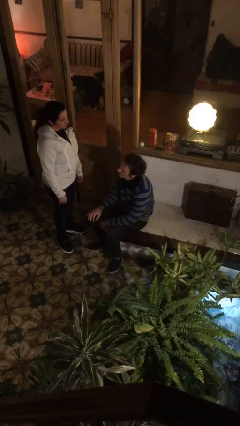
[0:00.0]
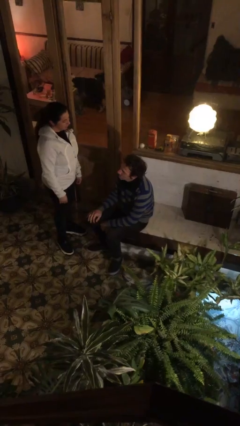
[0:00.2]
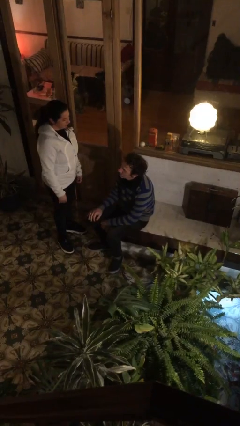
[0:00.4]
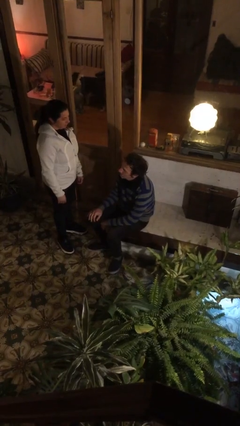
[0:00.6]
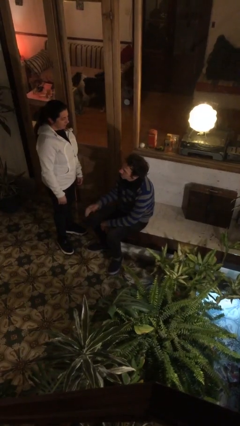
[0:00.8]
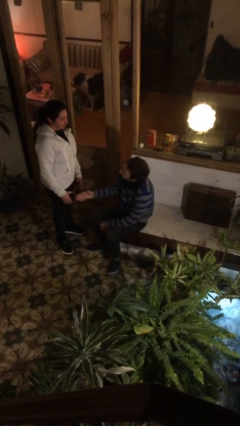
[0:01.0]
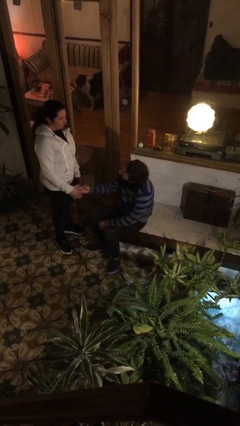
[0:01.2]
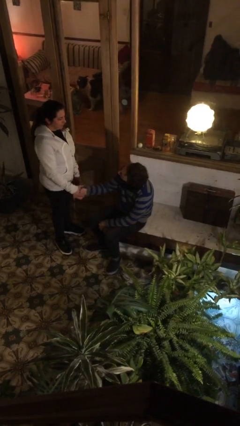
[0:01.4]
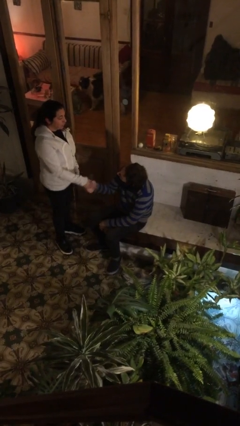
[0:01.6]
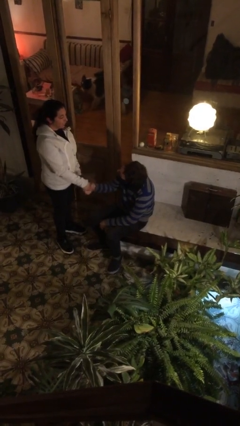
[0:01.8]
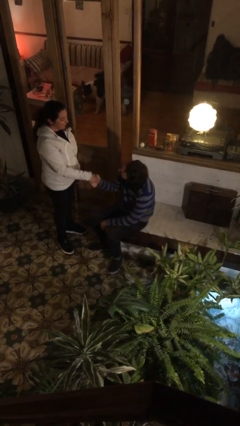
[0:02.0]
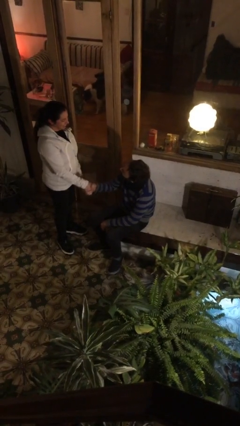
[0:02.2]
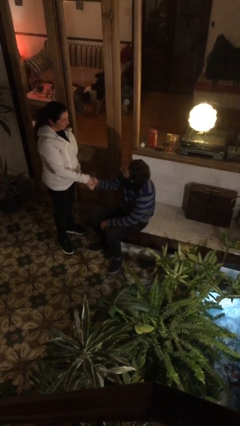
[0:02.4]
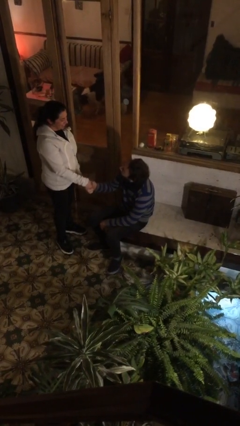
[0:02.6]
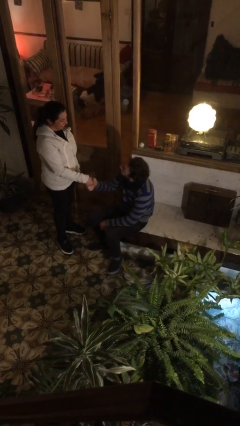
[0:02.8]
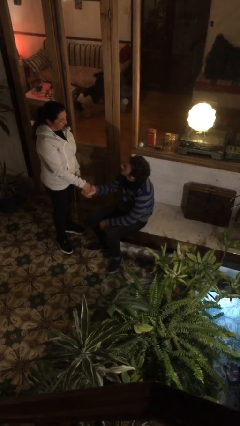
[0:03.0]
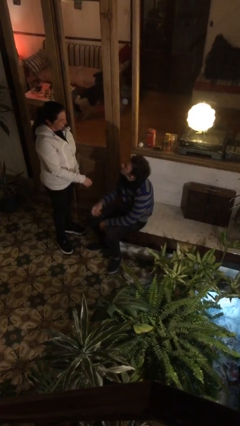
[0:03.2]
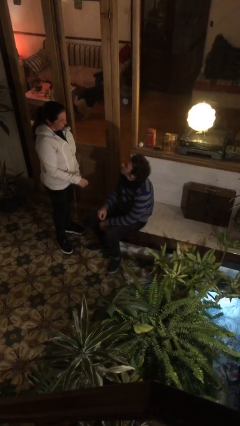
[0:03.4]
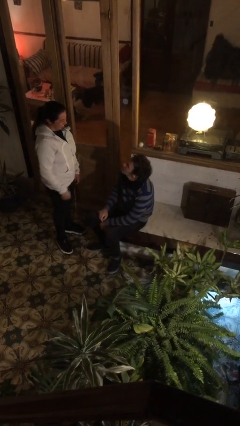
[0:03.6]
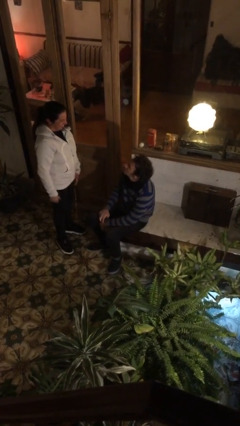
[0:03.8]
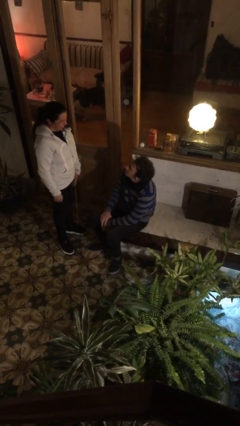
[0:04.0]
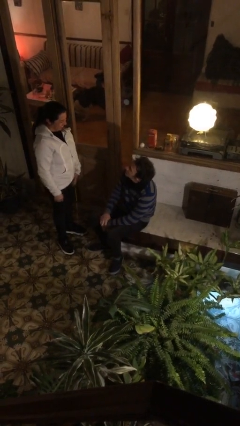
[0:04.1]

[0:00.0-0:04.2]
person shakes hand

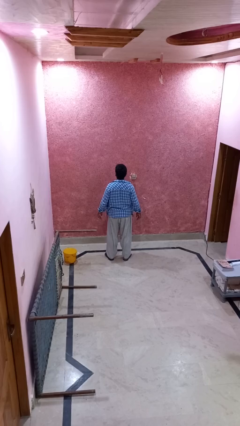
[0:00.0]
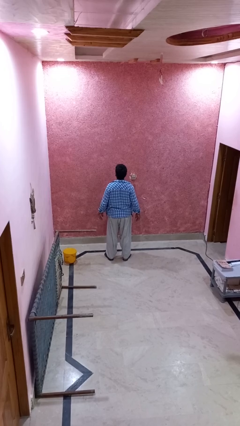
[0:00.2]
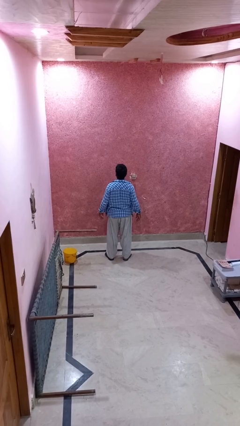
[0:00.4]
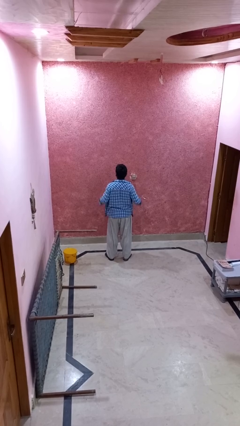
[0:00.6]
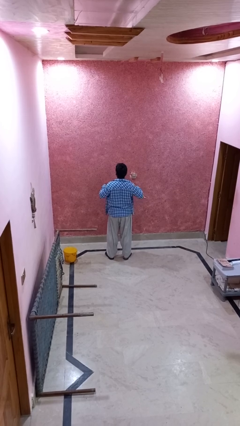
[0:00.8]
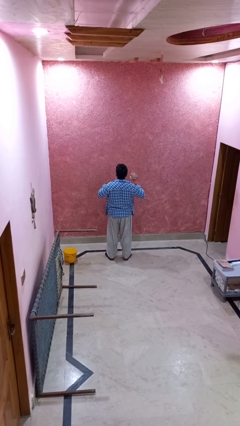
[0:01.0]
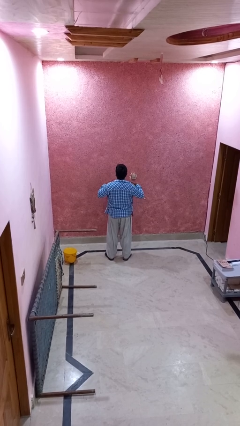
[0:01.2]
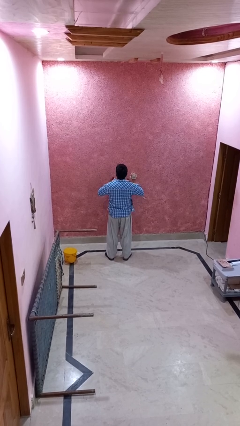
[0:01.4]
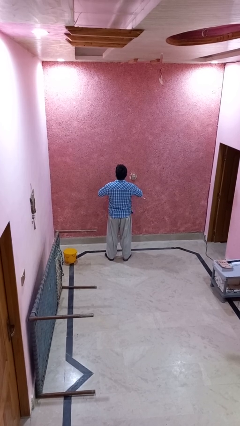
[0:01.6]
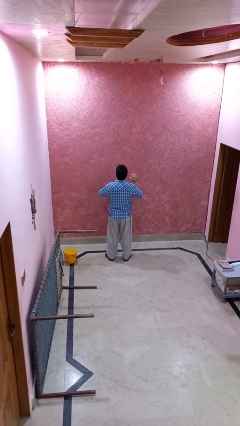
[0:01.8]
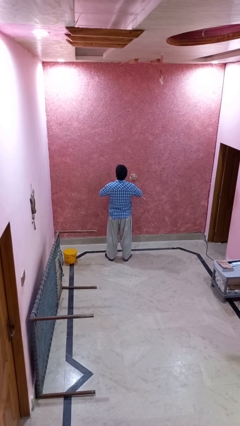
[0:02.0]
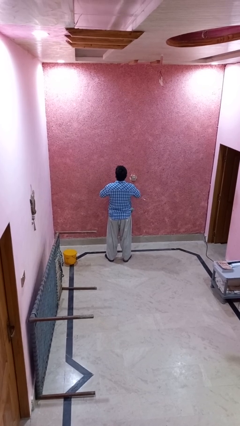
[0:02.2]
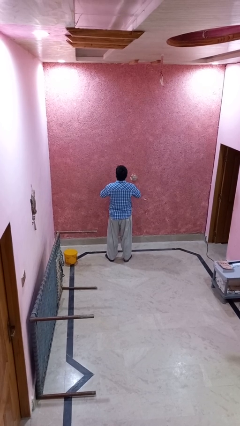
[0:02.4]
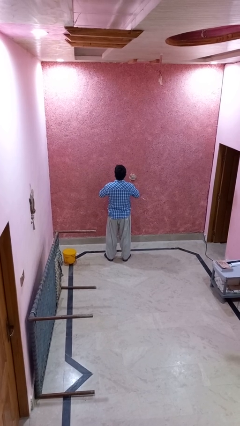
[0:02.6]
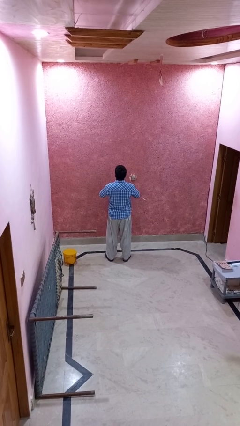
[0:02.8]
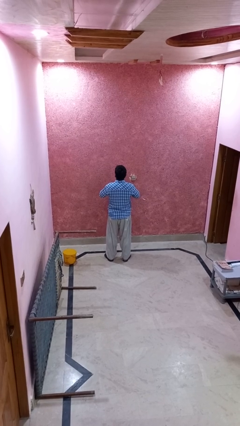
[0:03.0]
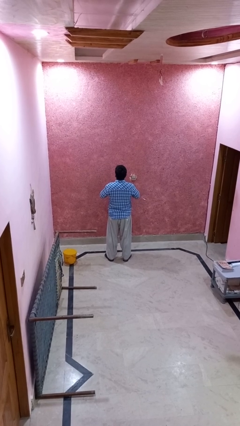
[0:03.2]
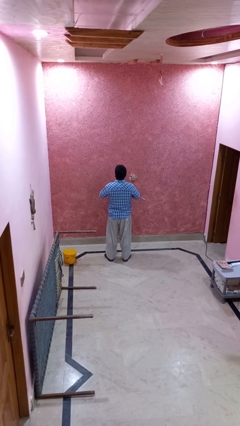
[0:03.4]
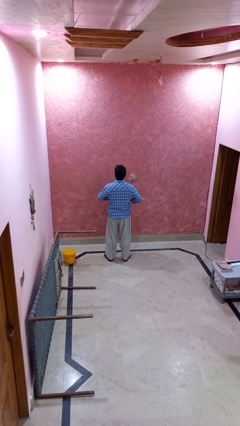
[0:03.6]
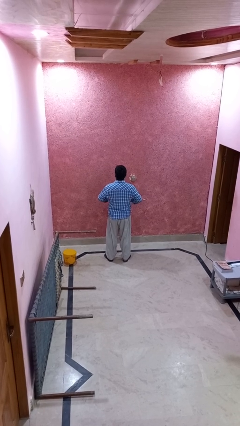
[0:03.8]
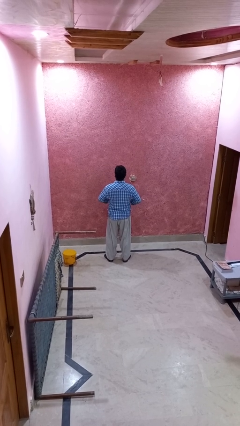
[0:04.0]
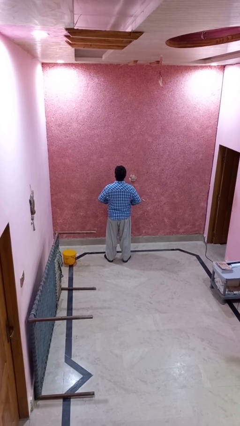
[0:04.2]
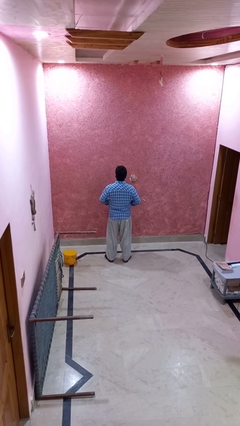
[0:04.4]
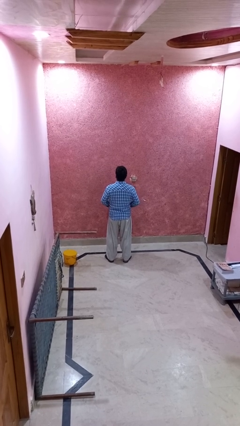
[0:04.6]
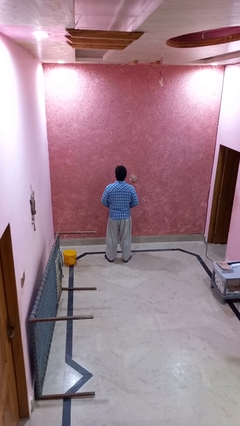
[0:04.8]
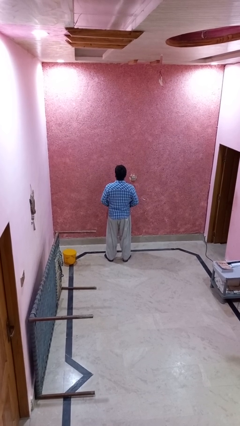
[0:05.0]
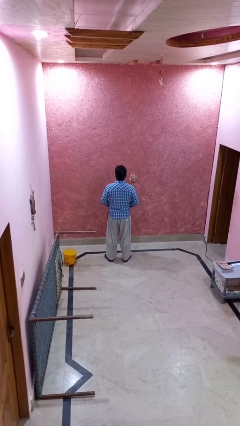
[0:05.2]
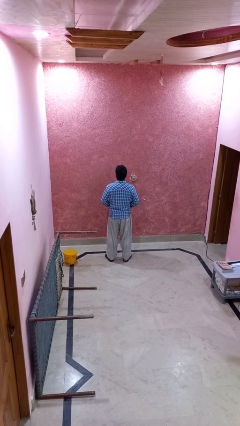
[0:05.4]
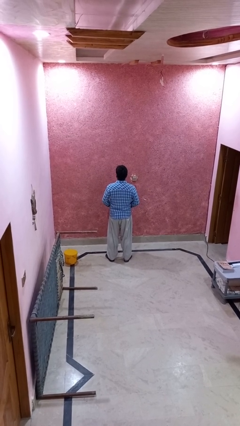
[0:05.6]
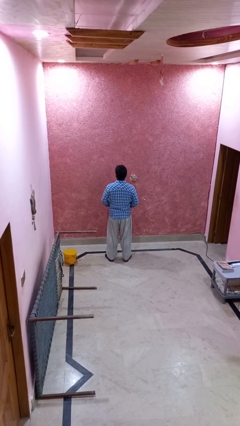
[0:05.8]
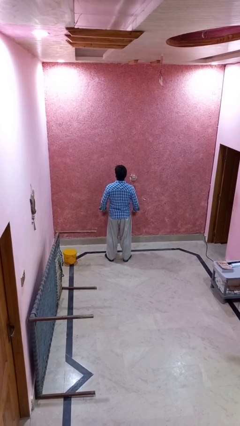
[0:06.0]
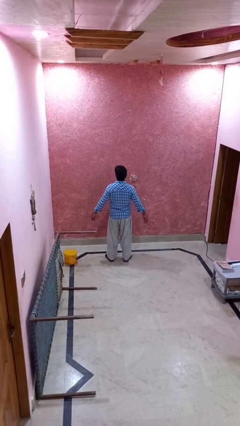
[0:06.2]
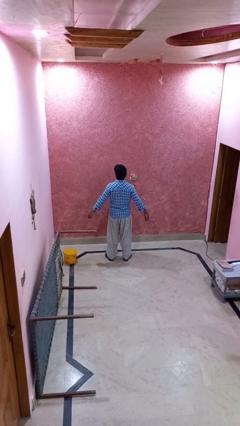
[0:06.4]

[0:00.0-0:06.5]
person buttons shirt

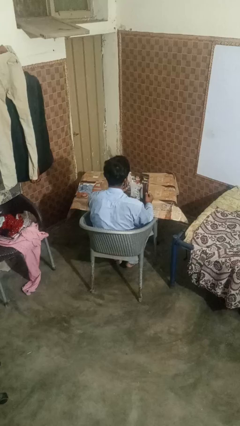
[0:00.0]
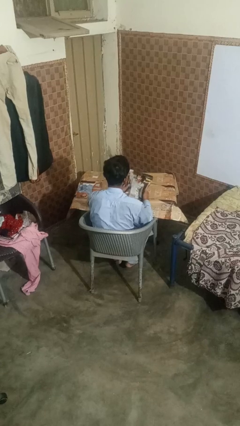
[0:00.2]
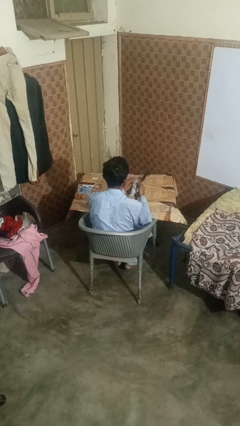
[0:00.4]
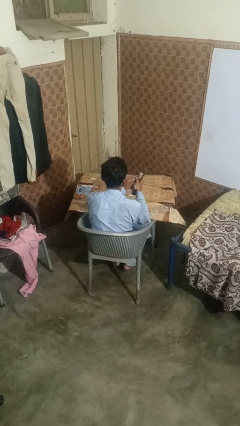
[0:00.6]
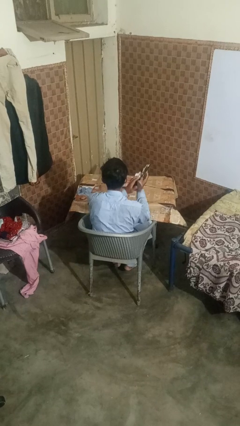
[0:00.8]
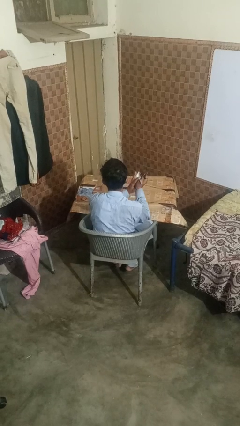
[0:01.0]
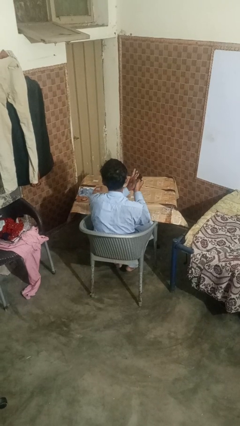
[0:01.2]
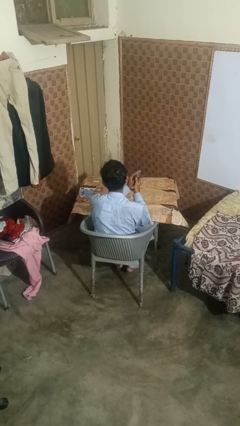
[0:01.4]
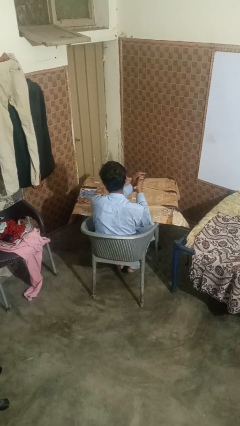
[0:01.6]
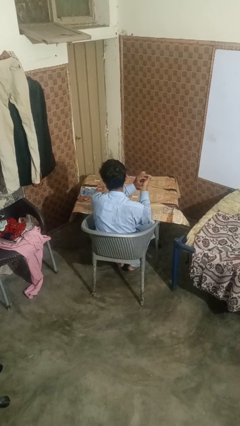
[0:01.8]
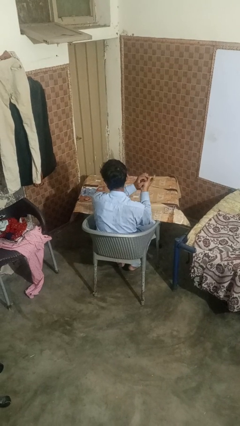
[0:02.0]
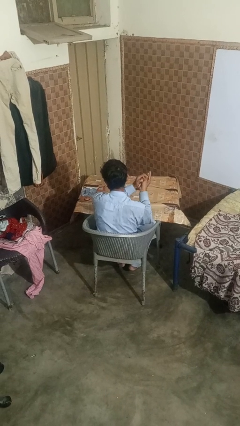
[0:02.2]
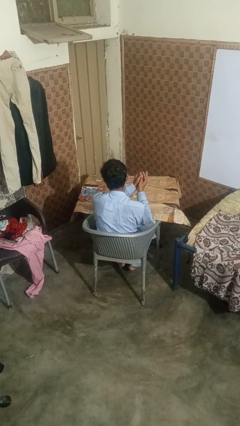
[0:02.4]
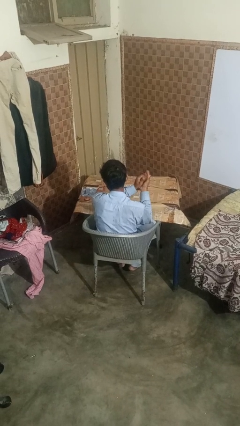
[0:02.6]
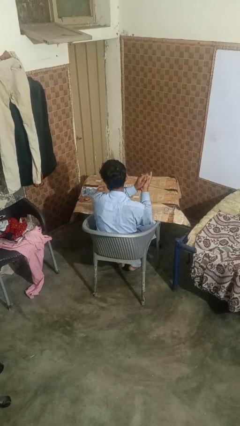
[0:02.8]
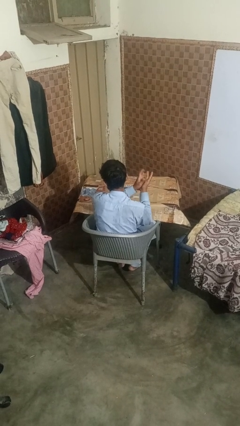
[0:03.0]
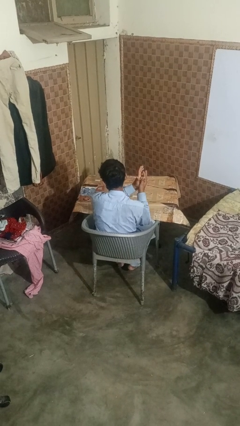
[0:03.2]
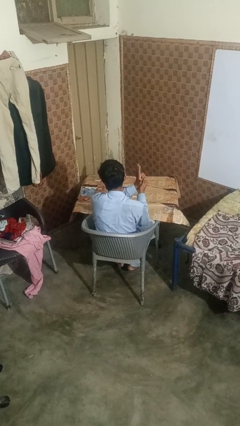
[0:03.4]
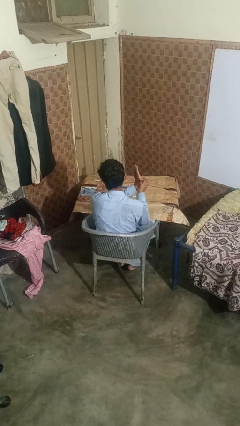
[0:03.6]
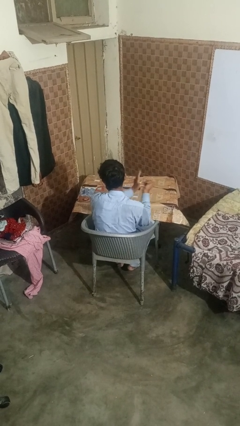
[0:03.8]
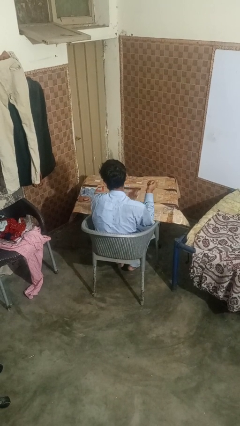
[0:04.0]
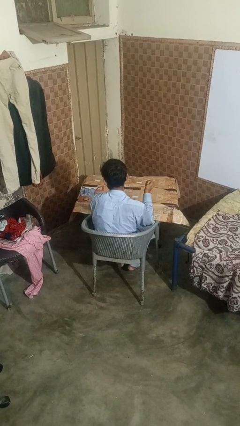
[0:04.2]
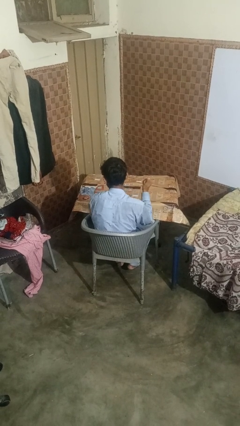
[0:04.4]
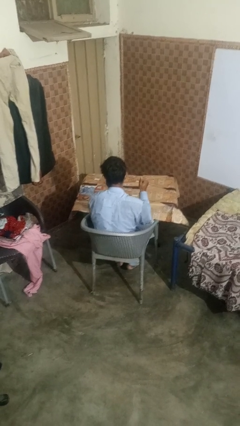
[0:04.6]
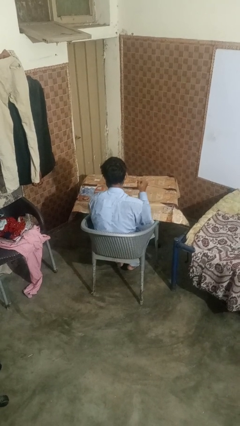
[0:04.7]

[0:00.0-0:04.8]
person crumples paper

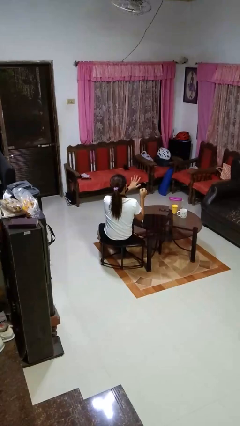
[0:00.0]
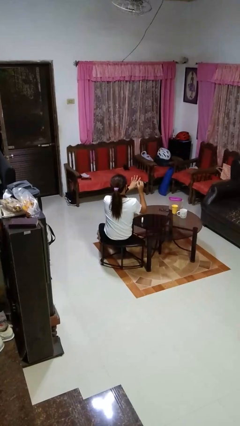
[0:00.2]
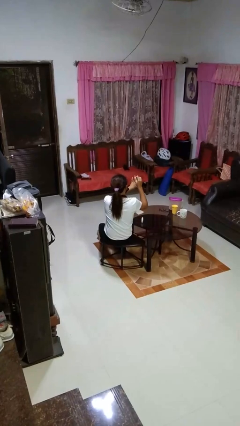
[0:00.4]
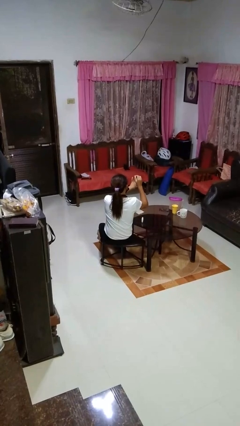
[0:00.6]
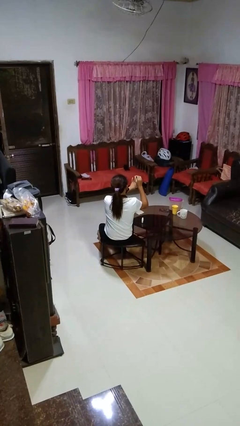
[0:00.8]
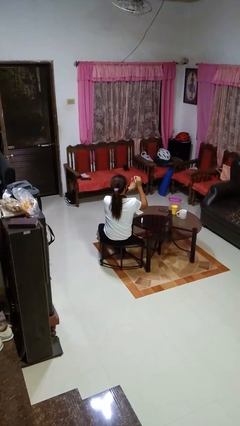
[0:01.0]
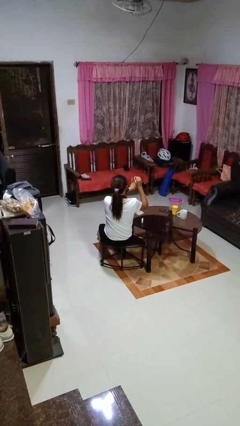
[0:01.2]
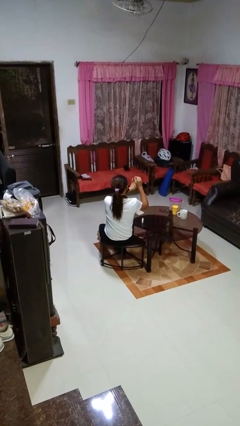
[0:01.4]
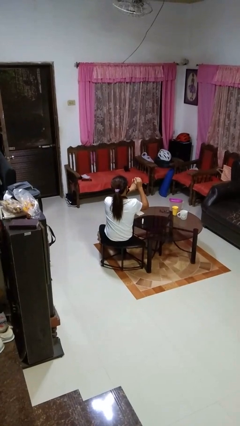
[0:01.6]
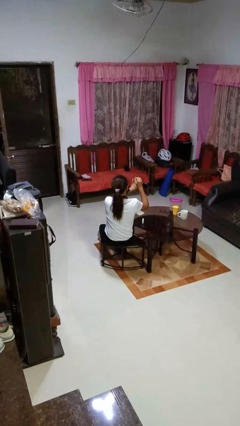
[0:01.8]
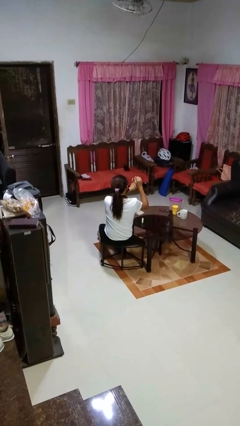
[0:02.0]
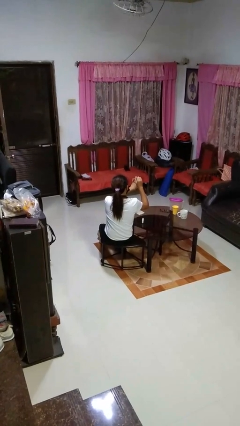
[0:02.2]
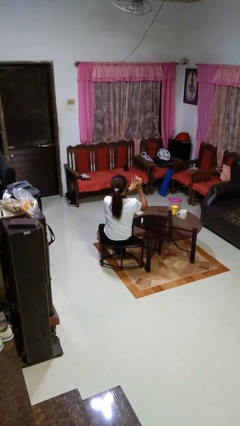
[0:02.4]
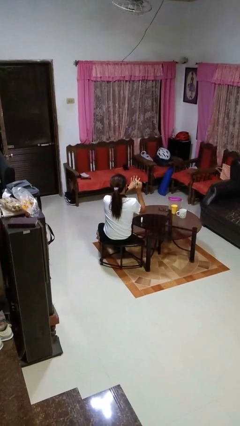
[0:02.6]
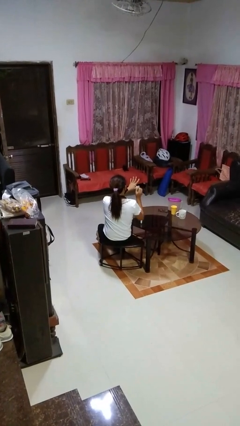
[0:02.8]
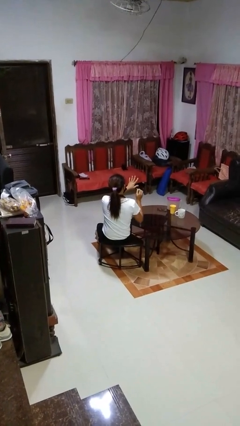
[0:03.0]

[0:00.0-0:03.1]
person paints fingernails
